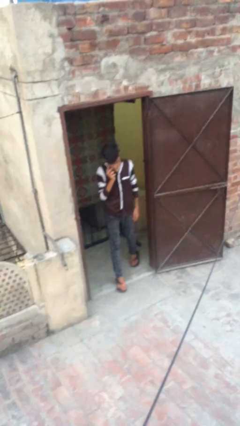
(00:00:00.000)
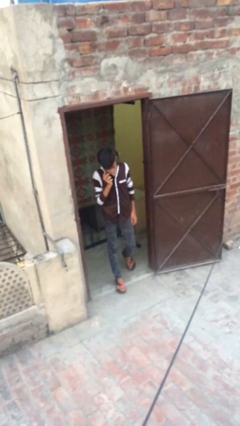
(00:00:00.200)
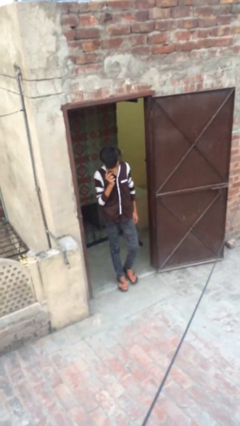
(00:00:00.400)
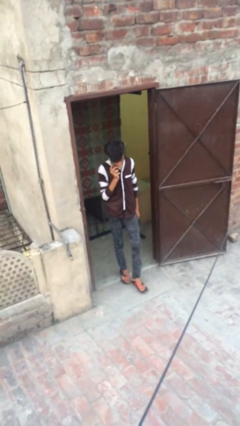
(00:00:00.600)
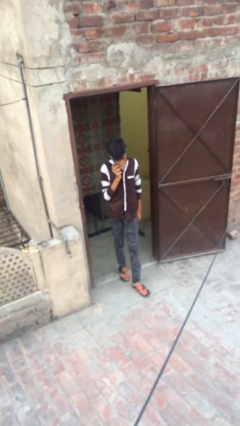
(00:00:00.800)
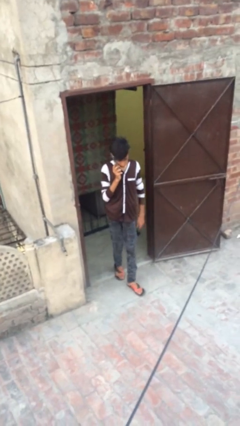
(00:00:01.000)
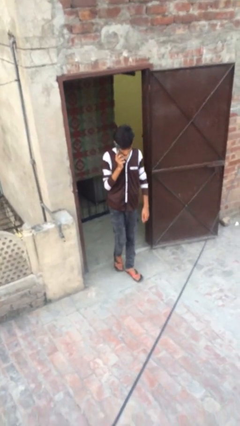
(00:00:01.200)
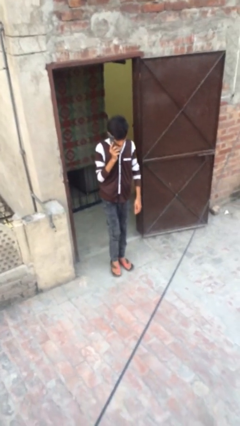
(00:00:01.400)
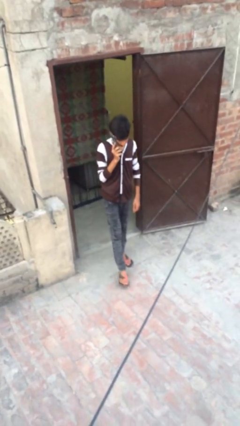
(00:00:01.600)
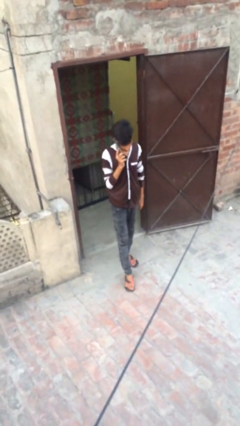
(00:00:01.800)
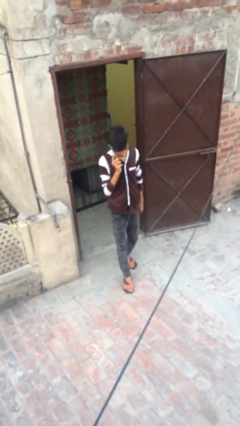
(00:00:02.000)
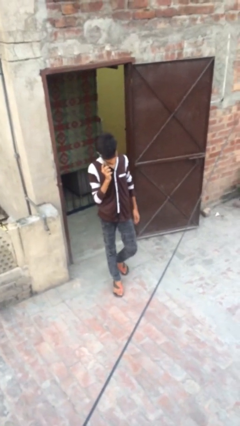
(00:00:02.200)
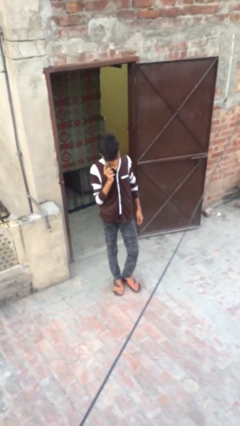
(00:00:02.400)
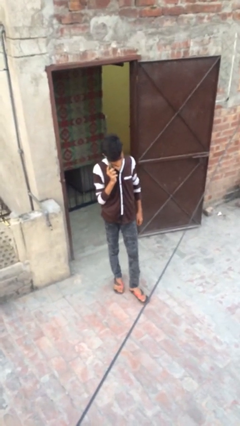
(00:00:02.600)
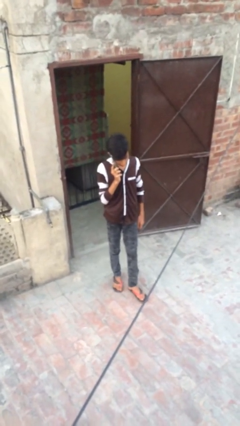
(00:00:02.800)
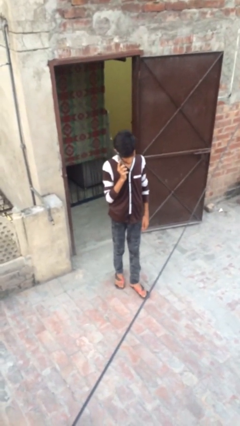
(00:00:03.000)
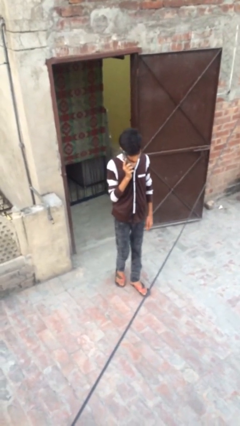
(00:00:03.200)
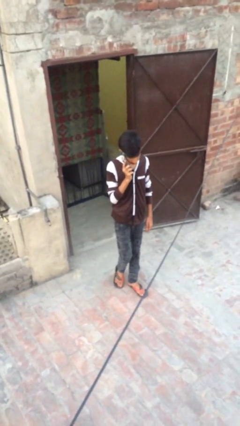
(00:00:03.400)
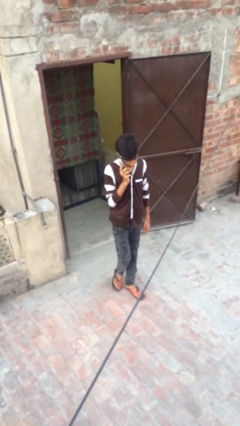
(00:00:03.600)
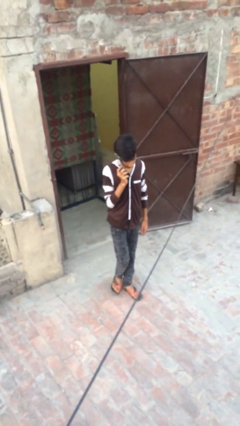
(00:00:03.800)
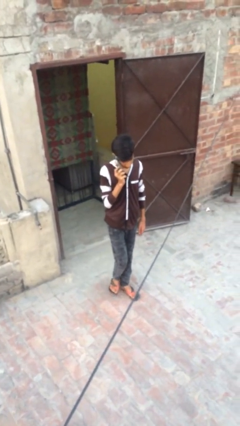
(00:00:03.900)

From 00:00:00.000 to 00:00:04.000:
person enters scene through structure

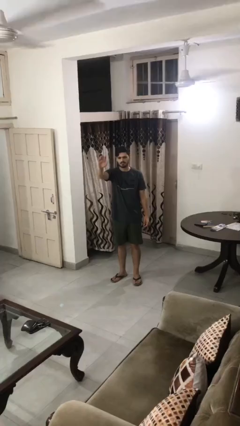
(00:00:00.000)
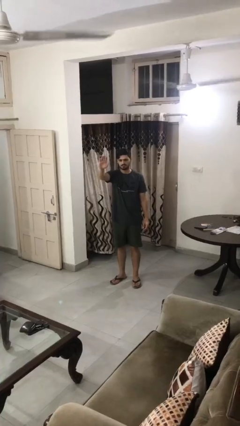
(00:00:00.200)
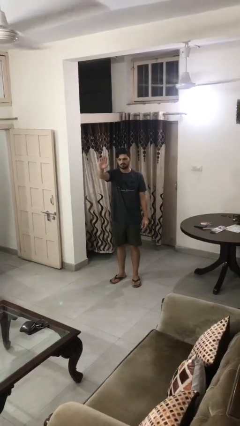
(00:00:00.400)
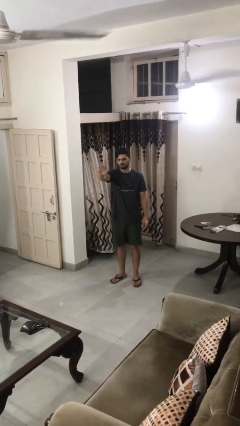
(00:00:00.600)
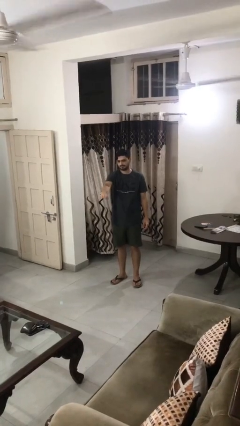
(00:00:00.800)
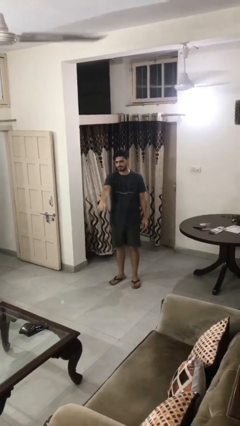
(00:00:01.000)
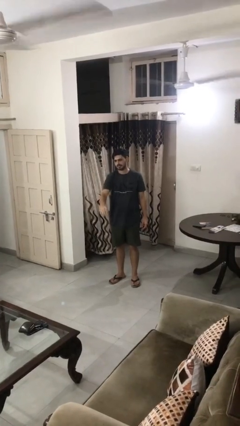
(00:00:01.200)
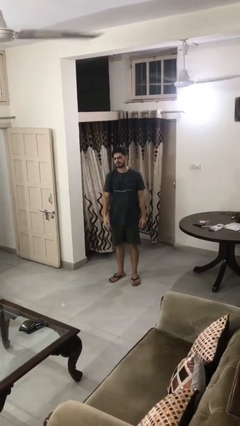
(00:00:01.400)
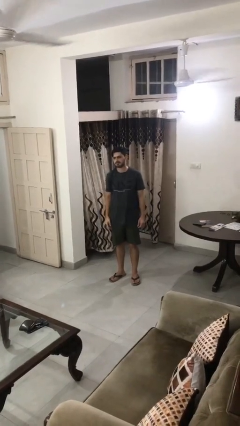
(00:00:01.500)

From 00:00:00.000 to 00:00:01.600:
person gestures swipe down

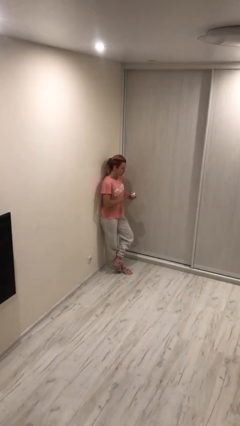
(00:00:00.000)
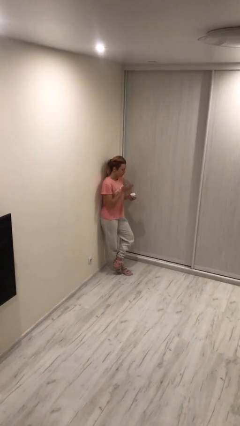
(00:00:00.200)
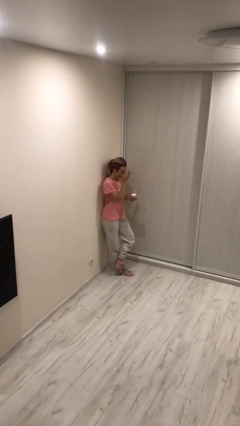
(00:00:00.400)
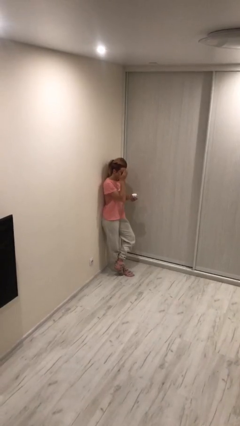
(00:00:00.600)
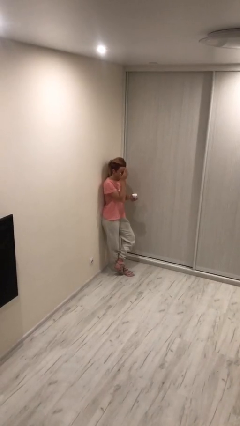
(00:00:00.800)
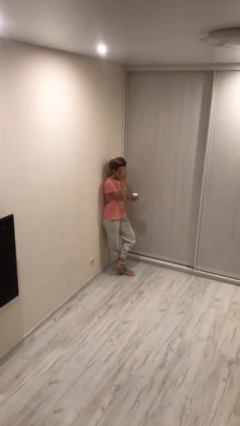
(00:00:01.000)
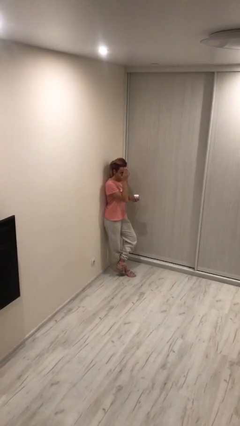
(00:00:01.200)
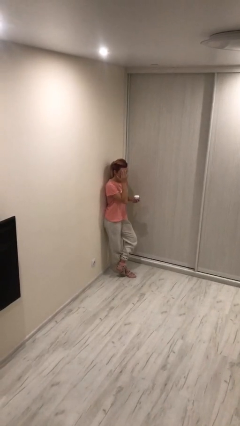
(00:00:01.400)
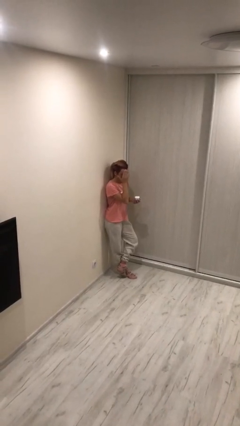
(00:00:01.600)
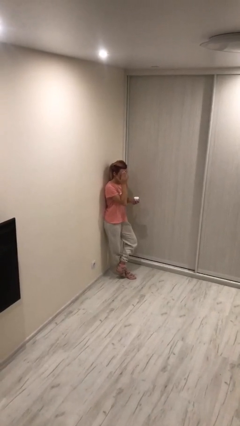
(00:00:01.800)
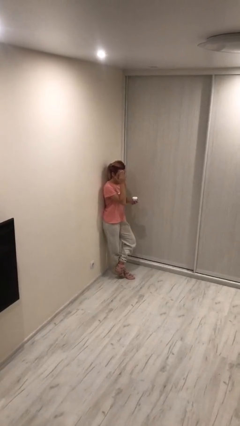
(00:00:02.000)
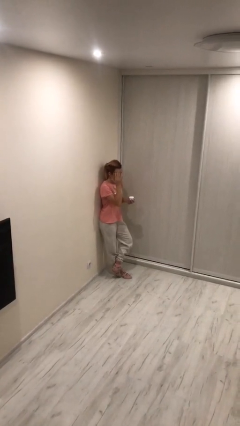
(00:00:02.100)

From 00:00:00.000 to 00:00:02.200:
person applies facial moisturizer

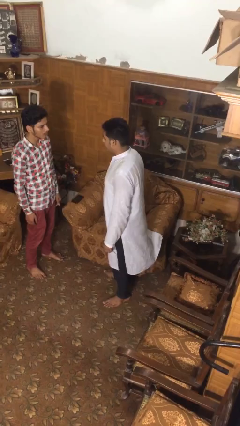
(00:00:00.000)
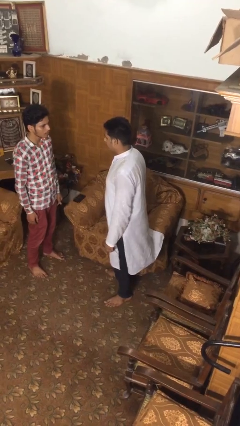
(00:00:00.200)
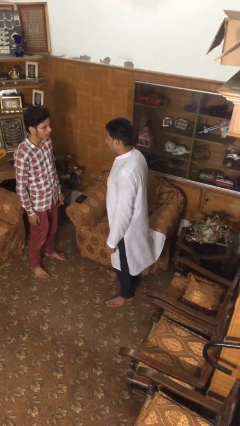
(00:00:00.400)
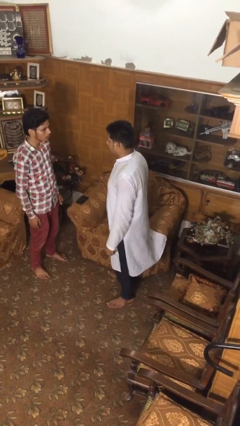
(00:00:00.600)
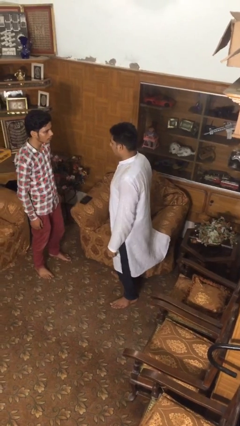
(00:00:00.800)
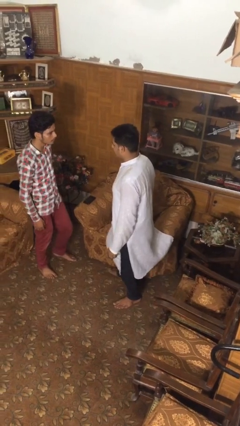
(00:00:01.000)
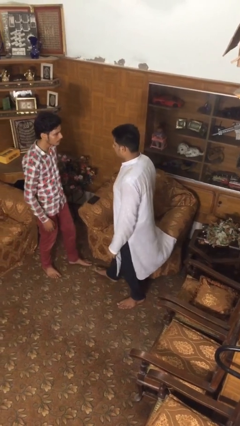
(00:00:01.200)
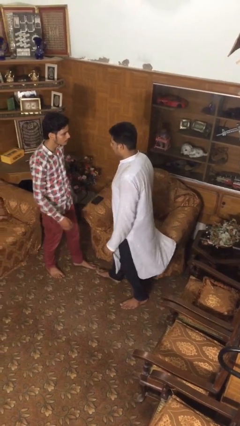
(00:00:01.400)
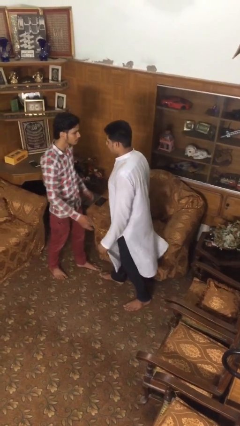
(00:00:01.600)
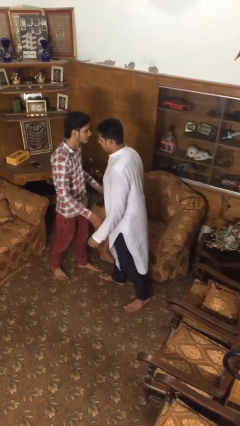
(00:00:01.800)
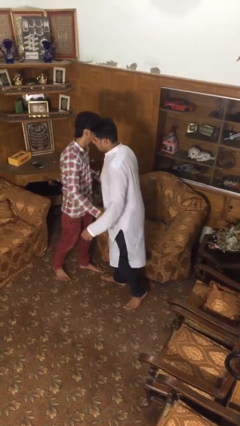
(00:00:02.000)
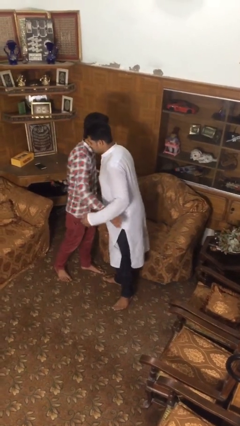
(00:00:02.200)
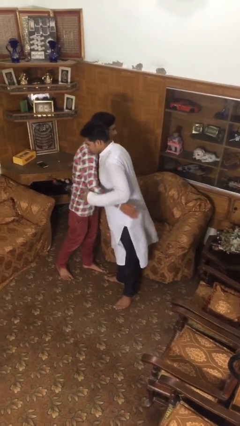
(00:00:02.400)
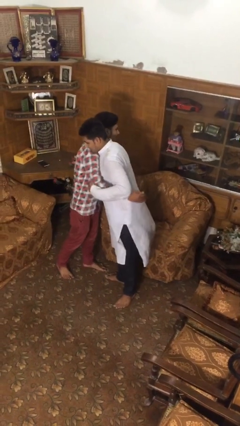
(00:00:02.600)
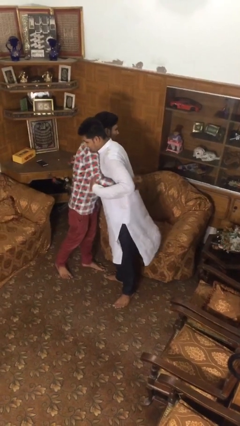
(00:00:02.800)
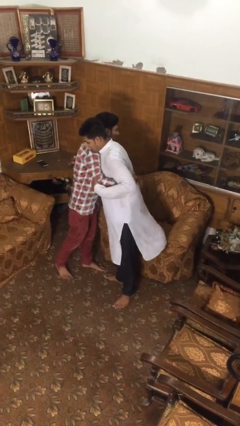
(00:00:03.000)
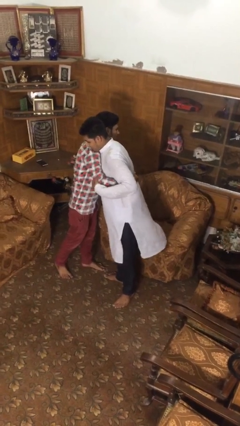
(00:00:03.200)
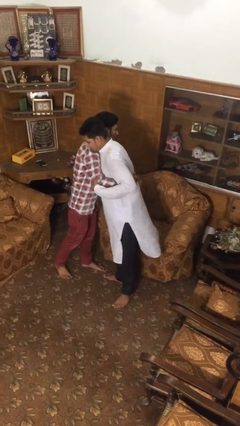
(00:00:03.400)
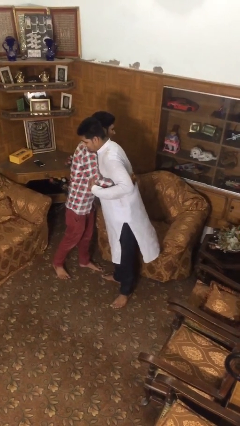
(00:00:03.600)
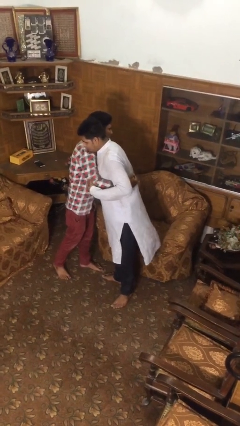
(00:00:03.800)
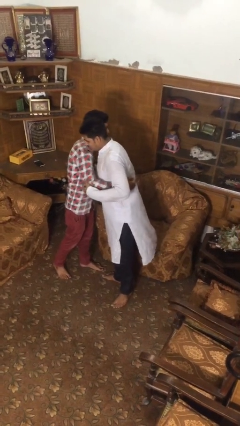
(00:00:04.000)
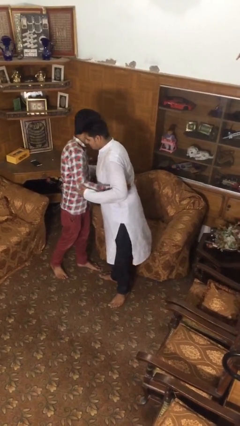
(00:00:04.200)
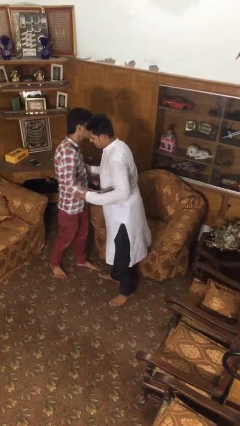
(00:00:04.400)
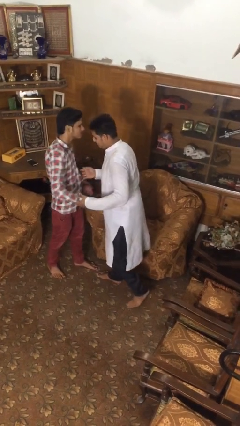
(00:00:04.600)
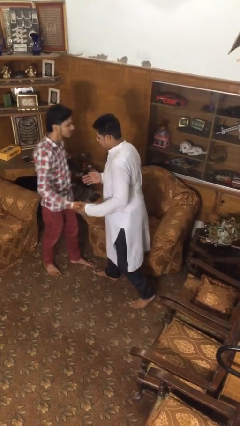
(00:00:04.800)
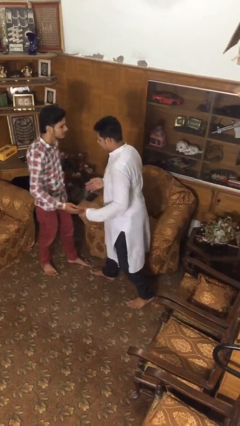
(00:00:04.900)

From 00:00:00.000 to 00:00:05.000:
person embraces person

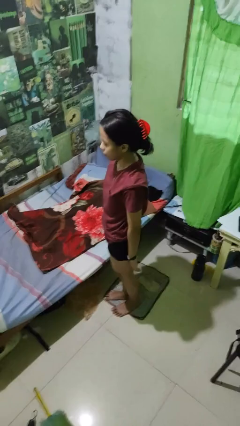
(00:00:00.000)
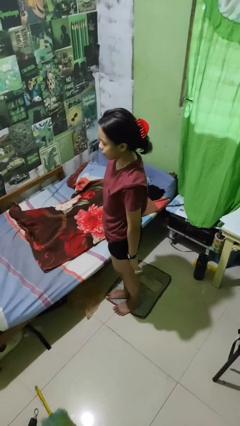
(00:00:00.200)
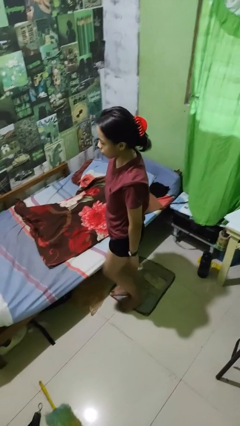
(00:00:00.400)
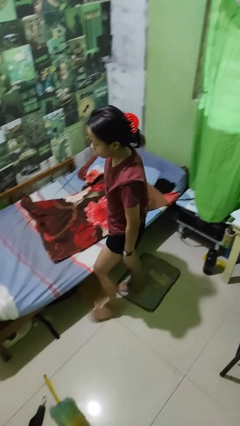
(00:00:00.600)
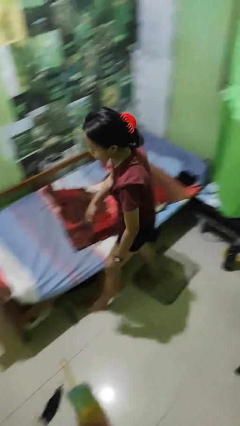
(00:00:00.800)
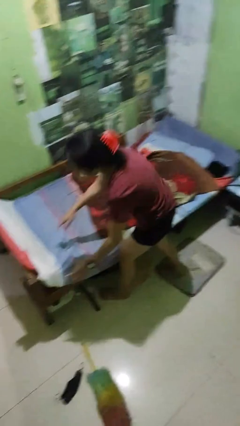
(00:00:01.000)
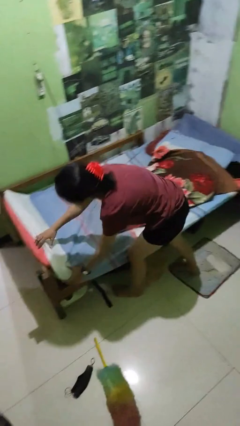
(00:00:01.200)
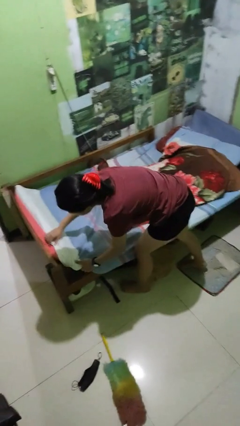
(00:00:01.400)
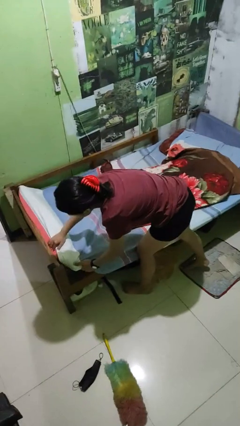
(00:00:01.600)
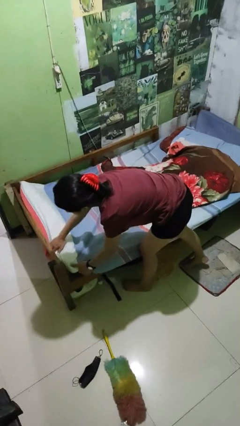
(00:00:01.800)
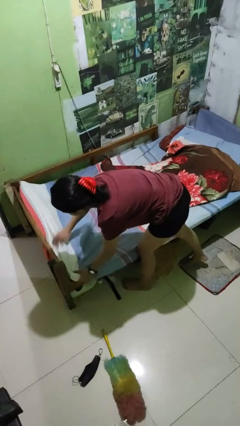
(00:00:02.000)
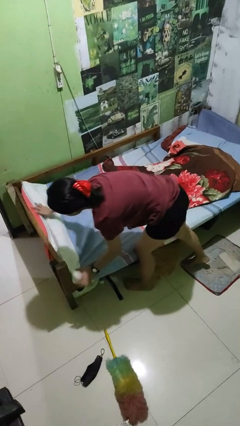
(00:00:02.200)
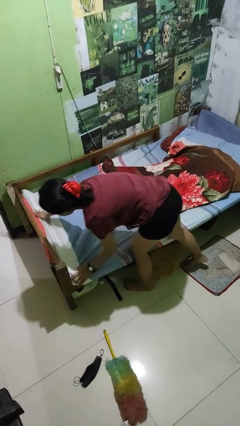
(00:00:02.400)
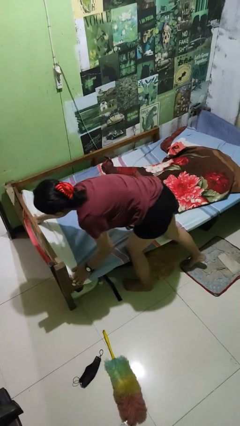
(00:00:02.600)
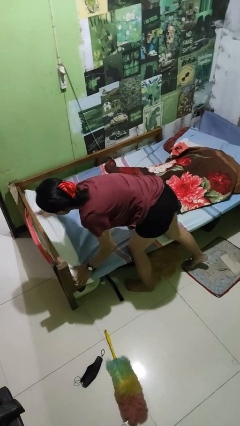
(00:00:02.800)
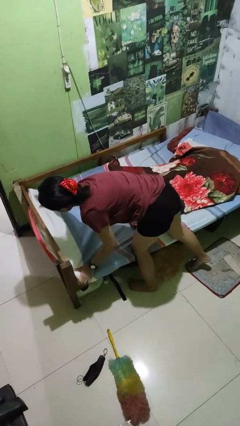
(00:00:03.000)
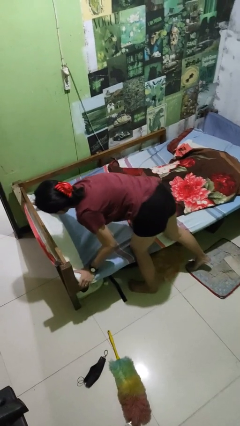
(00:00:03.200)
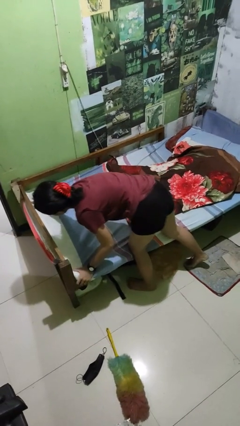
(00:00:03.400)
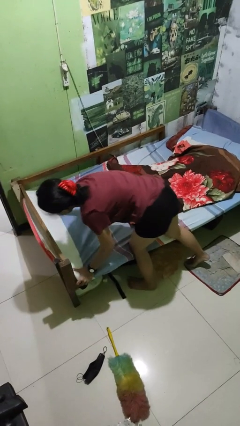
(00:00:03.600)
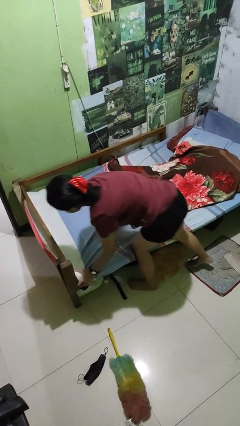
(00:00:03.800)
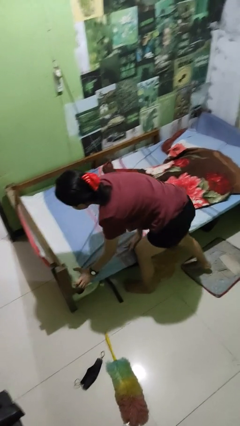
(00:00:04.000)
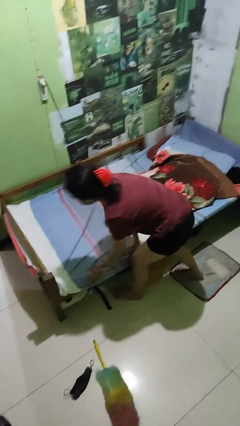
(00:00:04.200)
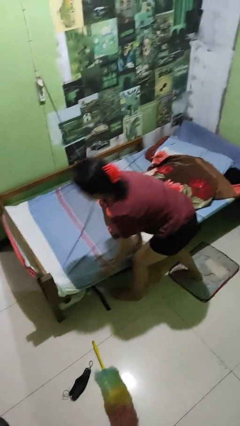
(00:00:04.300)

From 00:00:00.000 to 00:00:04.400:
person makes bed
